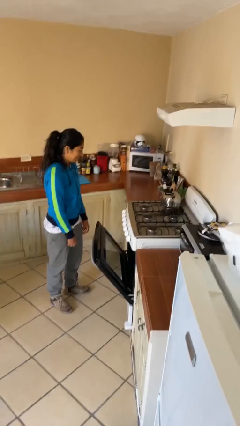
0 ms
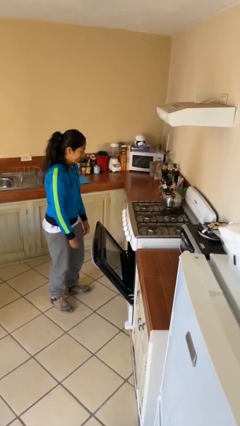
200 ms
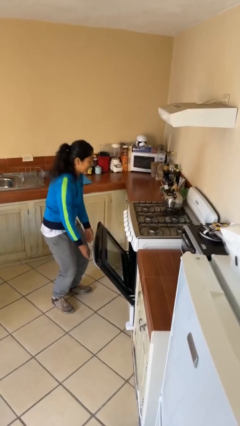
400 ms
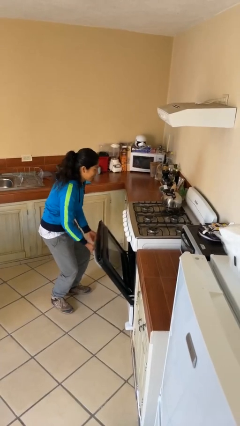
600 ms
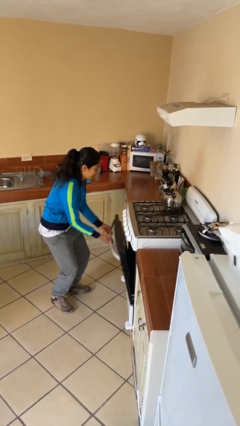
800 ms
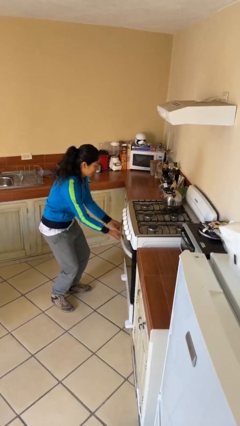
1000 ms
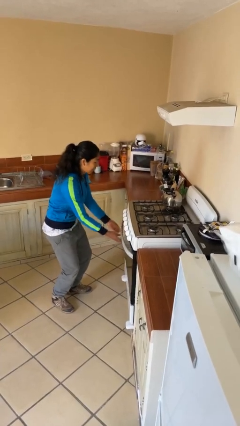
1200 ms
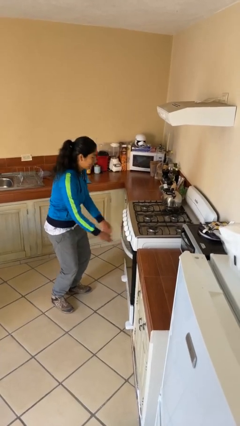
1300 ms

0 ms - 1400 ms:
person closes oven door

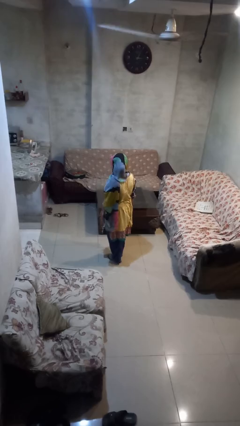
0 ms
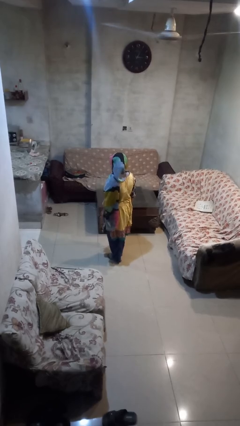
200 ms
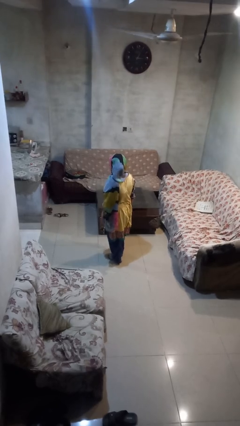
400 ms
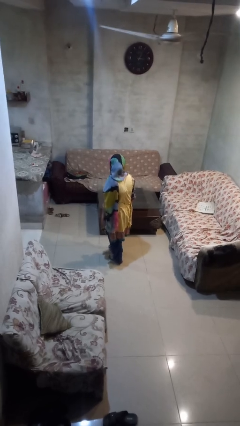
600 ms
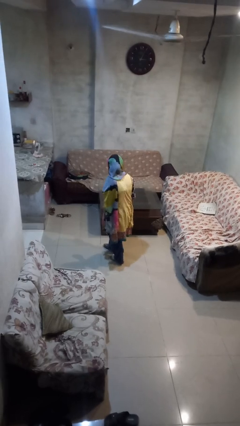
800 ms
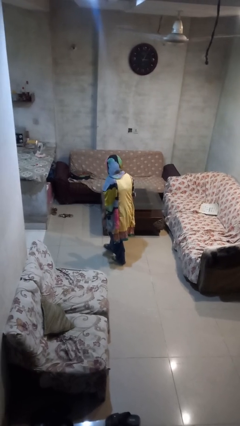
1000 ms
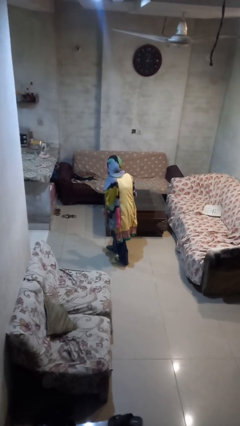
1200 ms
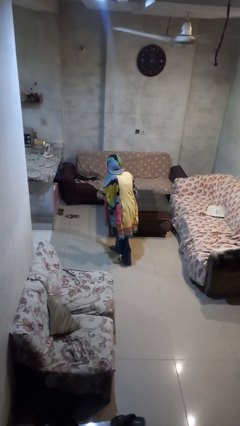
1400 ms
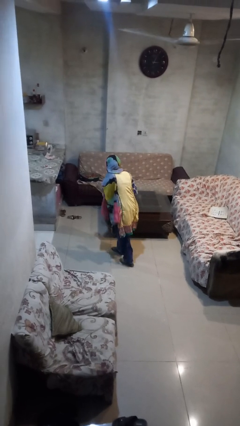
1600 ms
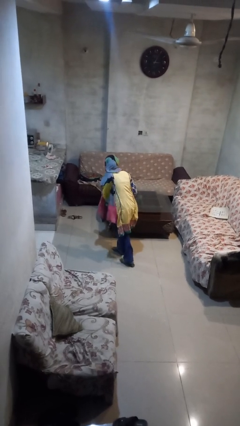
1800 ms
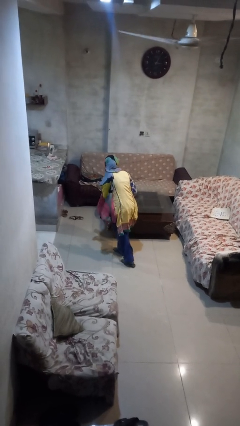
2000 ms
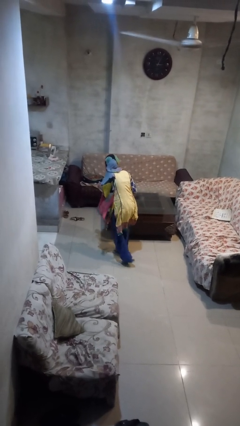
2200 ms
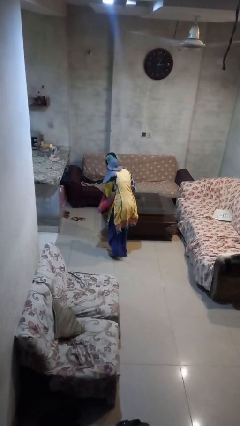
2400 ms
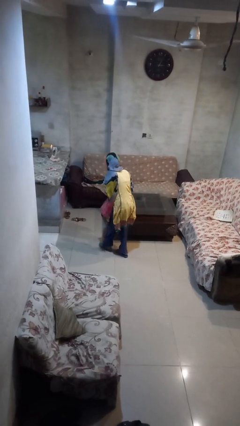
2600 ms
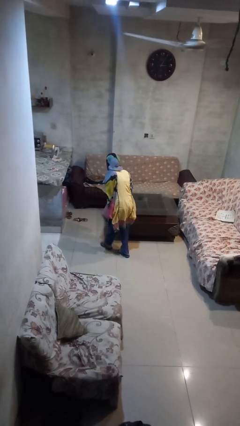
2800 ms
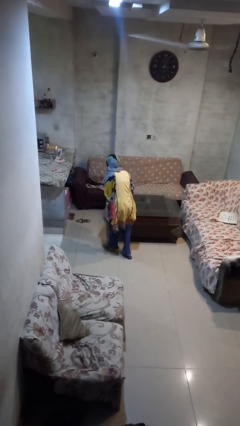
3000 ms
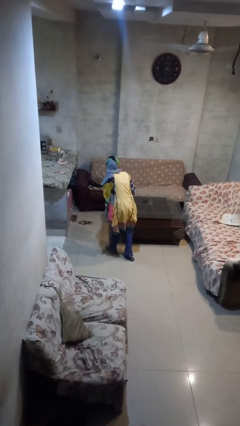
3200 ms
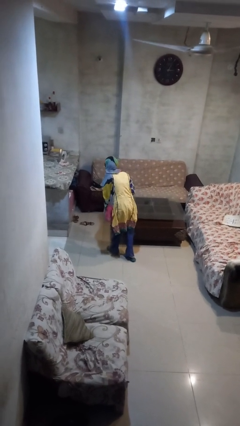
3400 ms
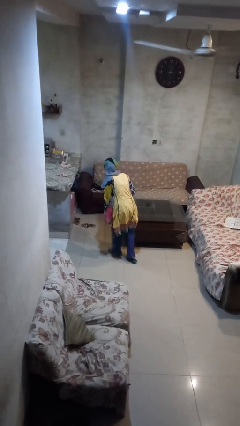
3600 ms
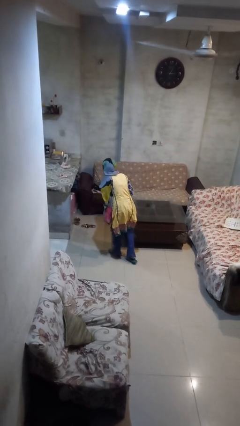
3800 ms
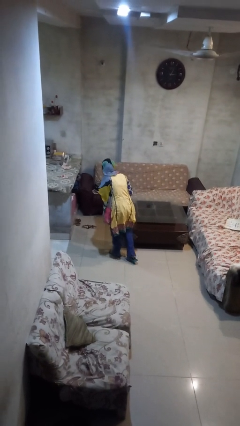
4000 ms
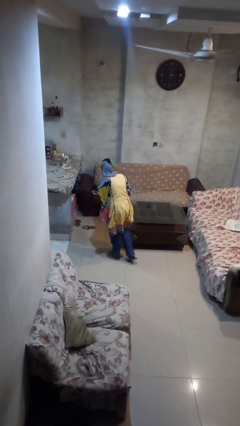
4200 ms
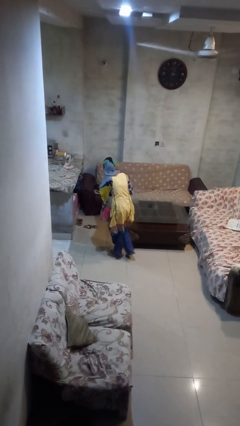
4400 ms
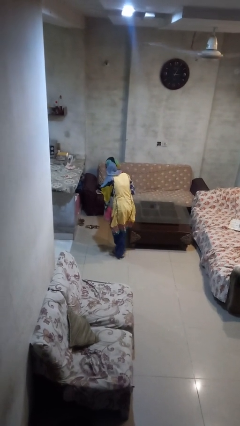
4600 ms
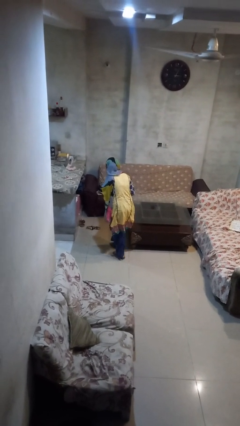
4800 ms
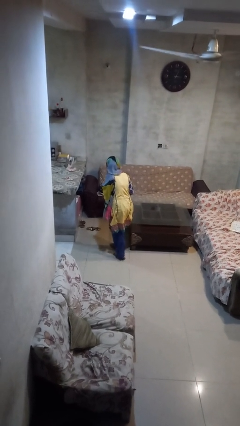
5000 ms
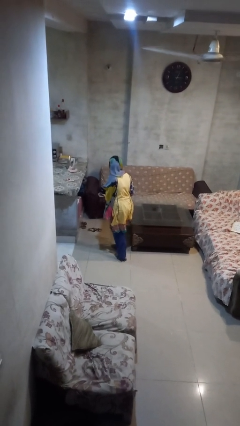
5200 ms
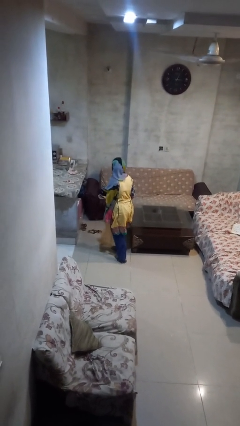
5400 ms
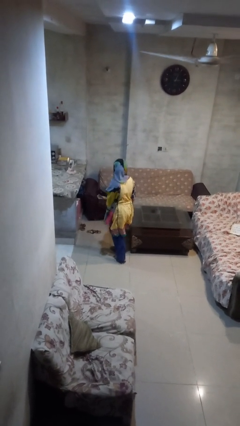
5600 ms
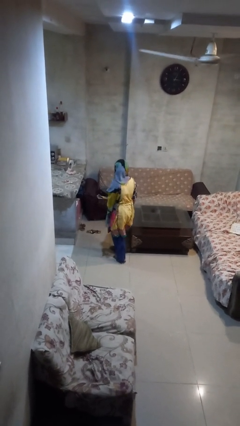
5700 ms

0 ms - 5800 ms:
person walks tiptoe

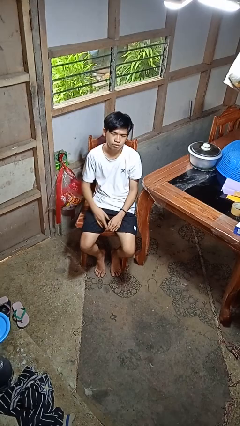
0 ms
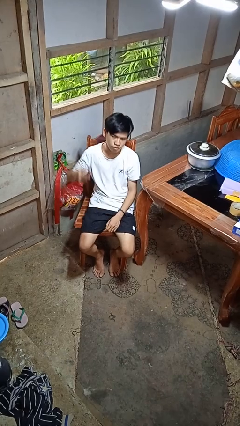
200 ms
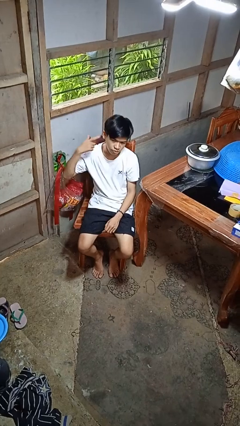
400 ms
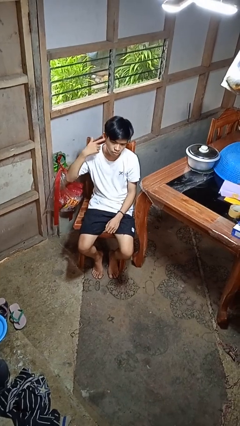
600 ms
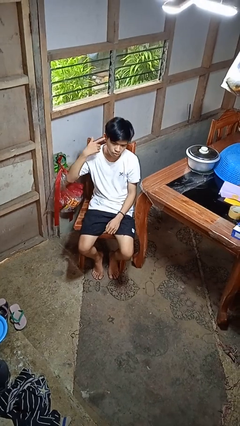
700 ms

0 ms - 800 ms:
person gestures listen closely

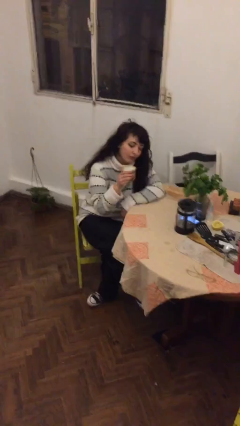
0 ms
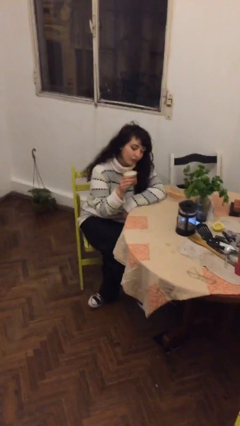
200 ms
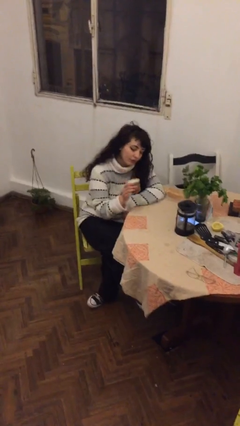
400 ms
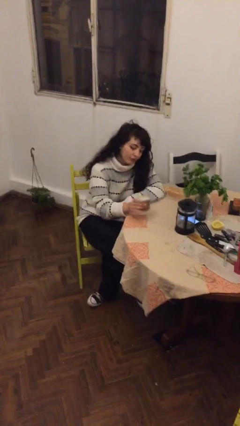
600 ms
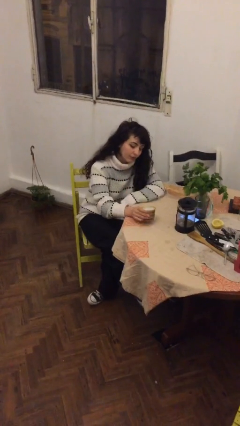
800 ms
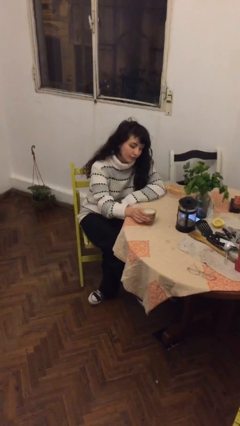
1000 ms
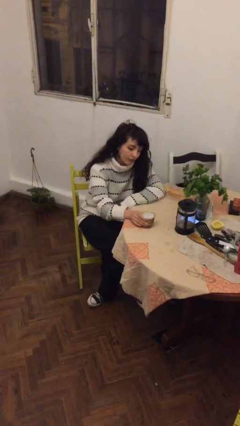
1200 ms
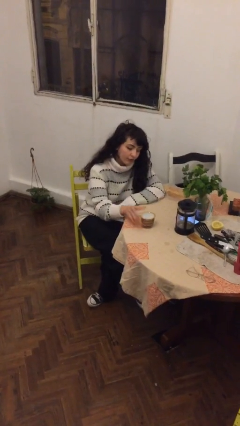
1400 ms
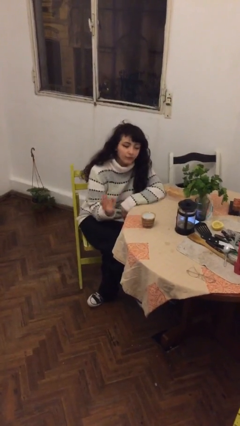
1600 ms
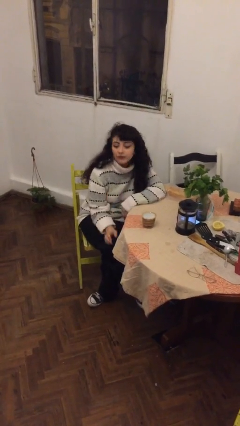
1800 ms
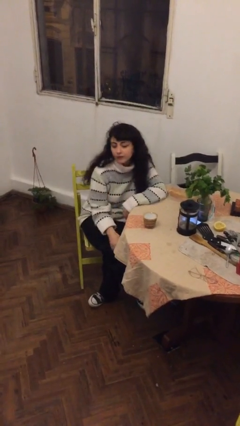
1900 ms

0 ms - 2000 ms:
person puts down object on table

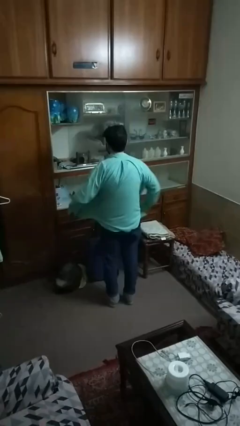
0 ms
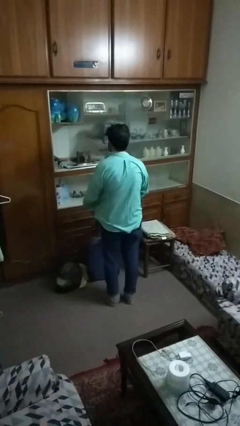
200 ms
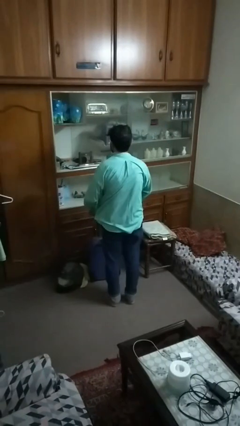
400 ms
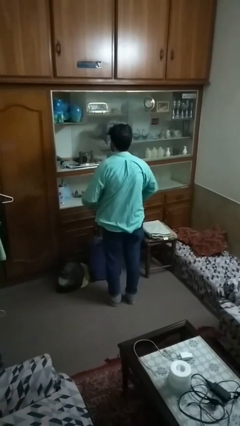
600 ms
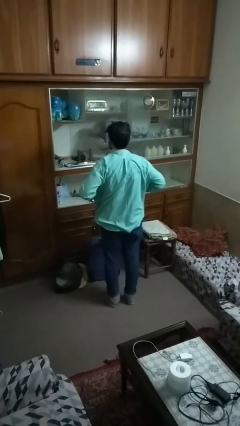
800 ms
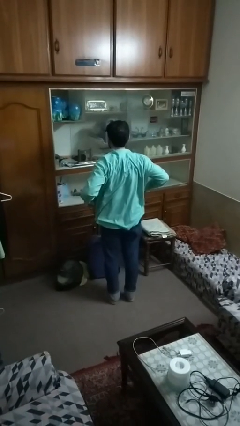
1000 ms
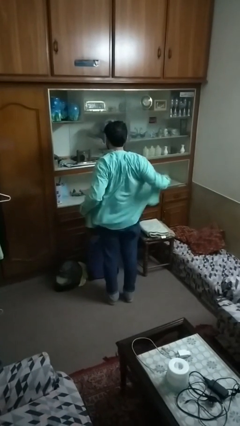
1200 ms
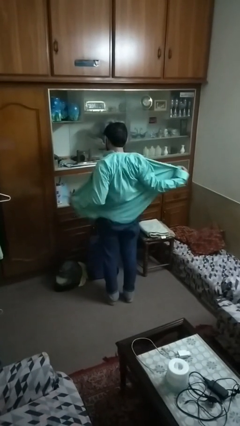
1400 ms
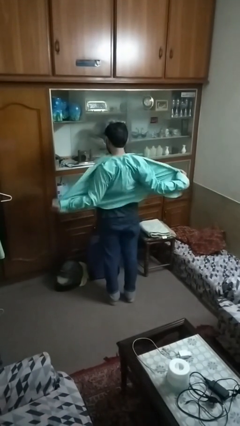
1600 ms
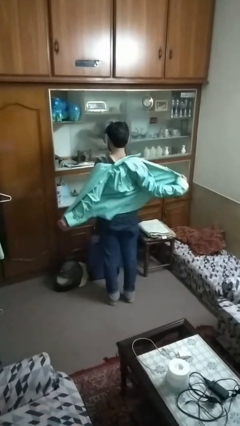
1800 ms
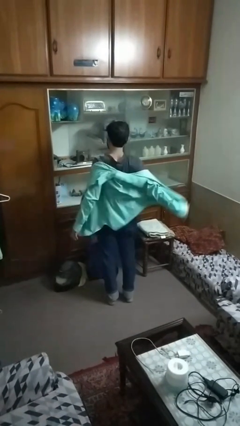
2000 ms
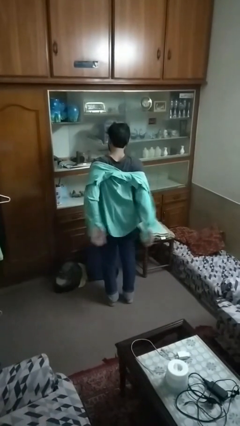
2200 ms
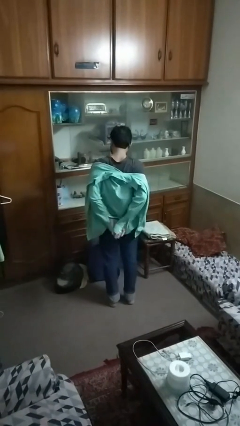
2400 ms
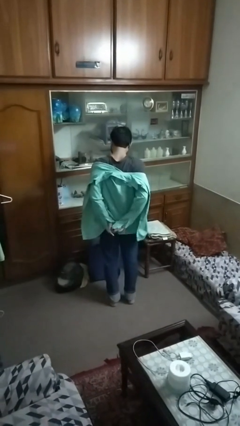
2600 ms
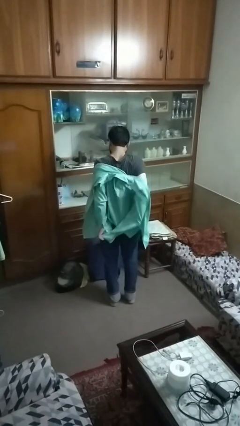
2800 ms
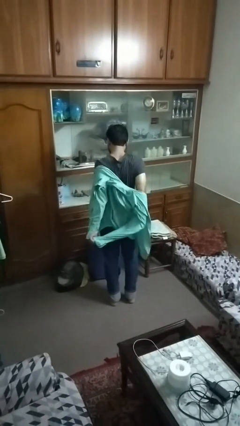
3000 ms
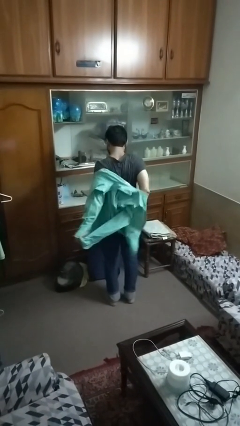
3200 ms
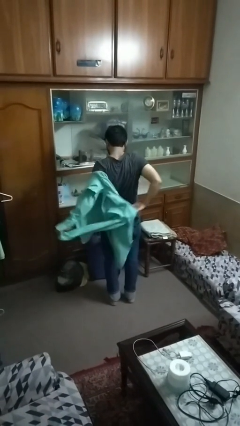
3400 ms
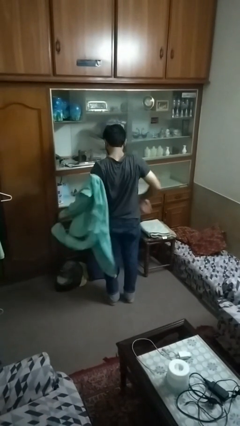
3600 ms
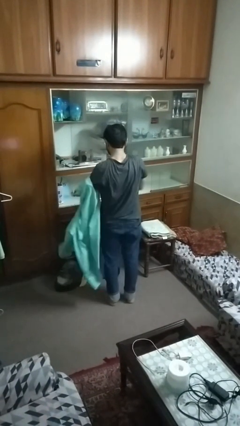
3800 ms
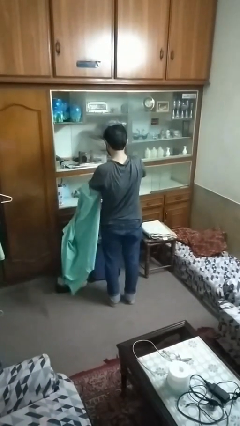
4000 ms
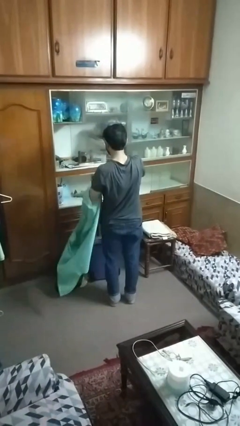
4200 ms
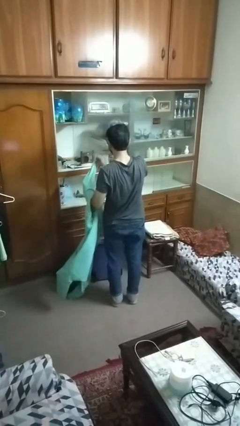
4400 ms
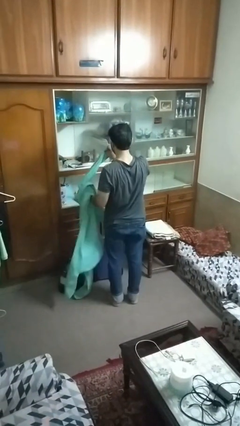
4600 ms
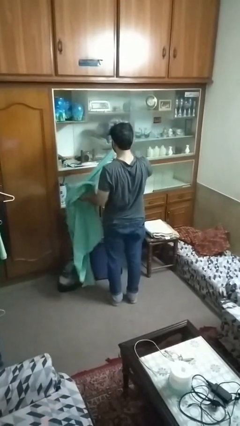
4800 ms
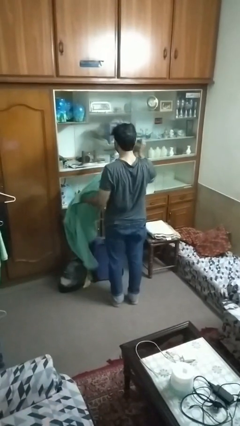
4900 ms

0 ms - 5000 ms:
person takes off shirt

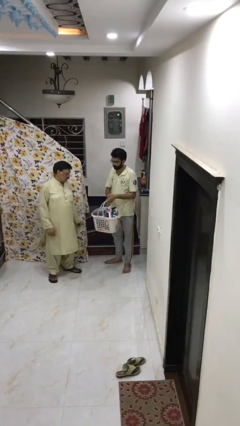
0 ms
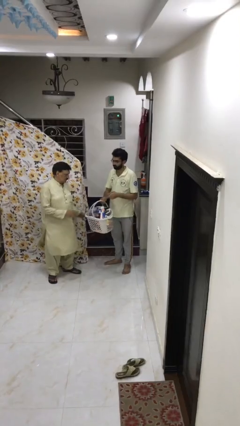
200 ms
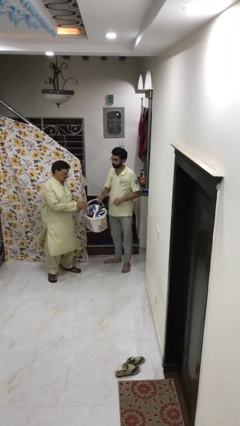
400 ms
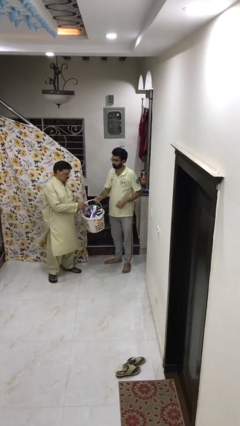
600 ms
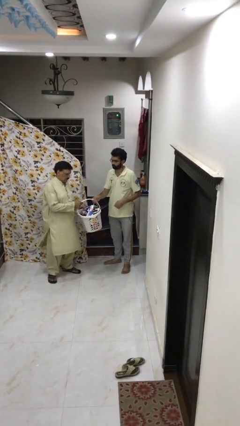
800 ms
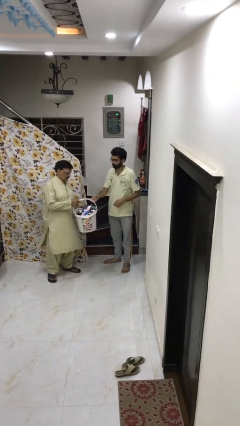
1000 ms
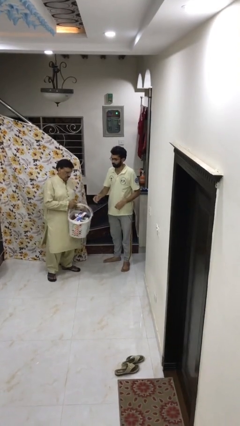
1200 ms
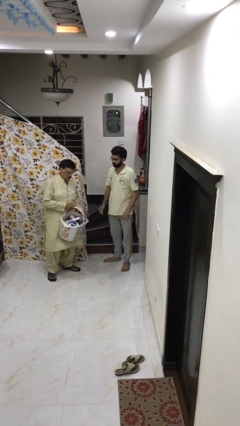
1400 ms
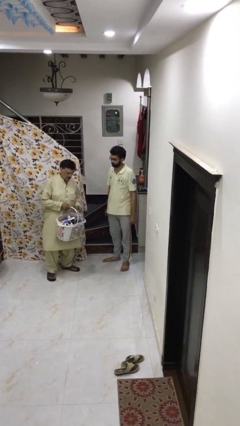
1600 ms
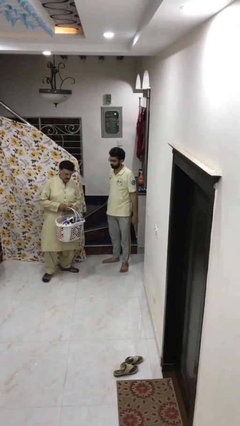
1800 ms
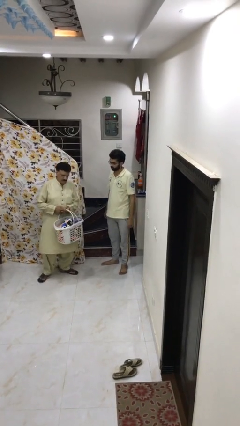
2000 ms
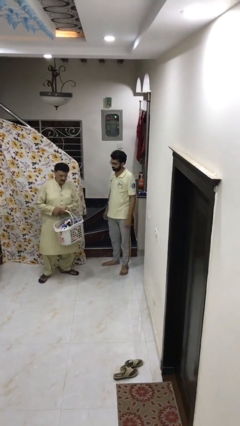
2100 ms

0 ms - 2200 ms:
person transfers object to person

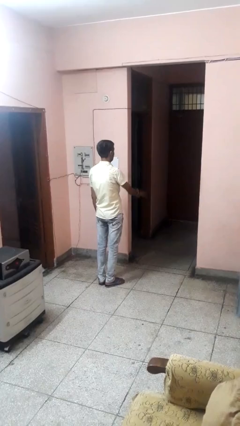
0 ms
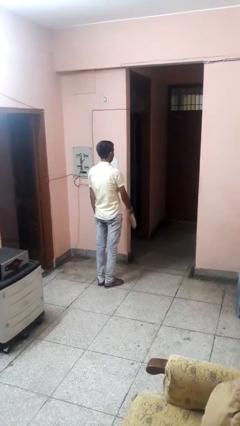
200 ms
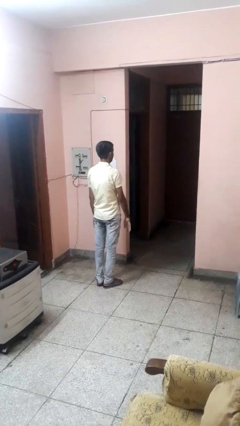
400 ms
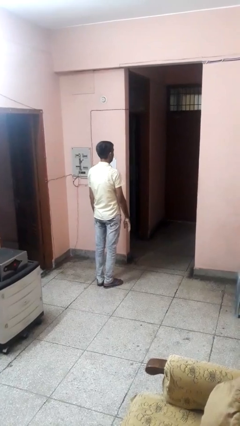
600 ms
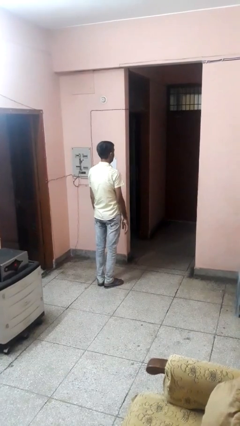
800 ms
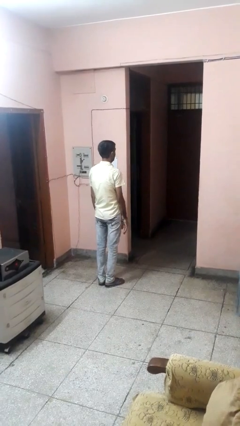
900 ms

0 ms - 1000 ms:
person gestures swipe down
